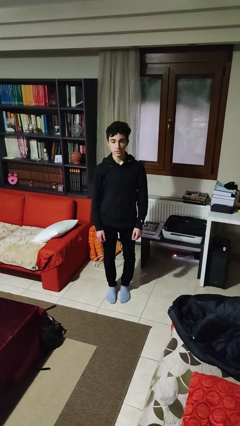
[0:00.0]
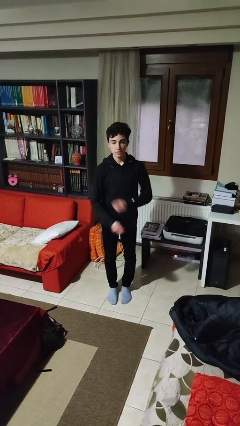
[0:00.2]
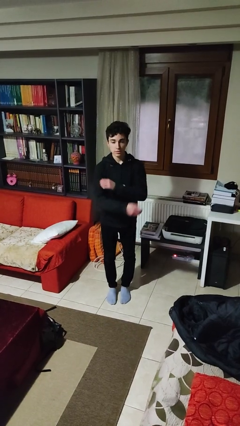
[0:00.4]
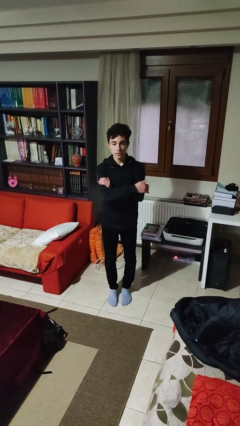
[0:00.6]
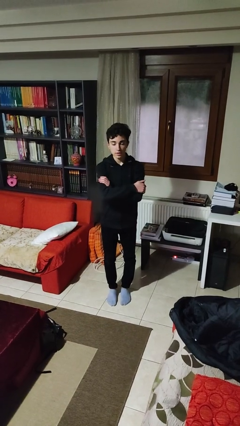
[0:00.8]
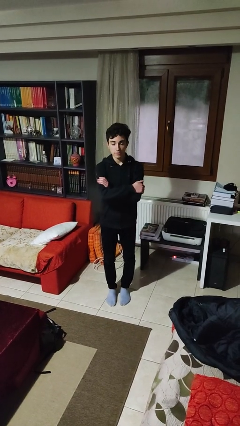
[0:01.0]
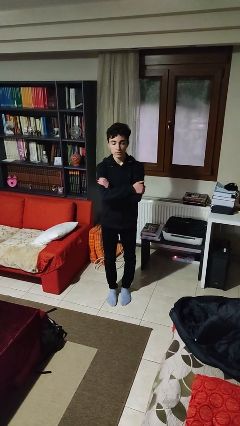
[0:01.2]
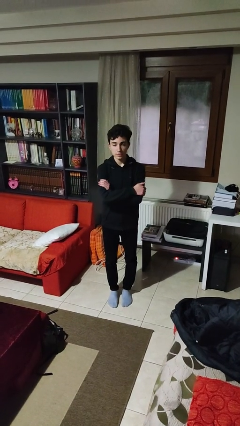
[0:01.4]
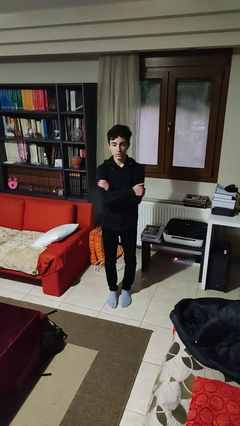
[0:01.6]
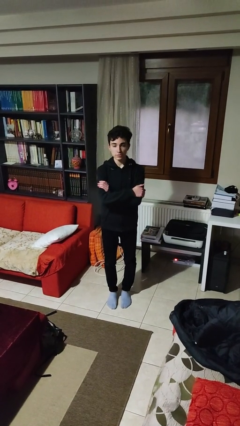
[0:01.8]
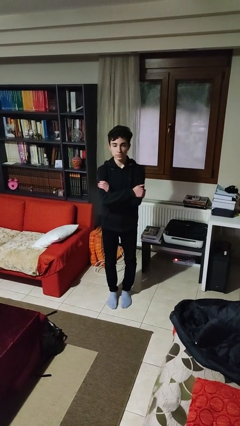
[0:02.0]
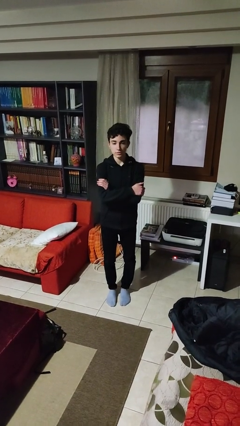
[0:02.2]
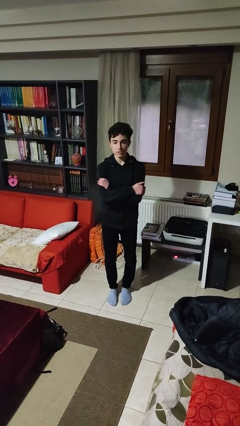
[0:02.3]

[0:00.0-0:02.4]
person crosses arms

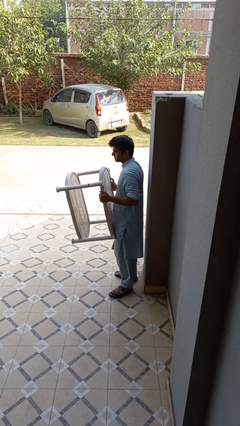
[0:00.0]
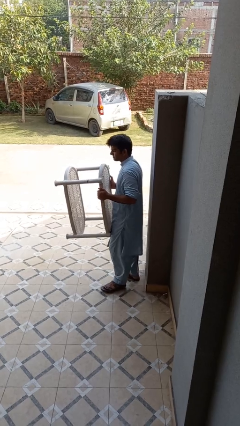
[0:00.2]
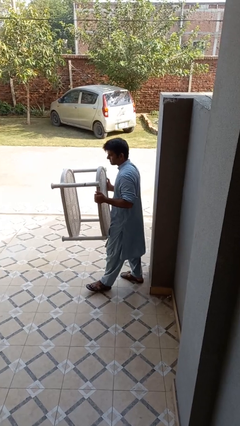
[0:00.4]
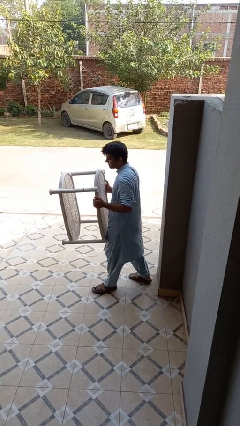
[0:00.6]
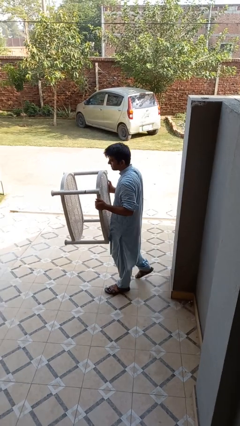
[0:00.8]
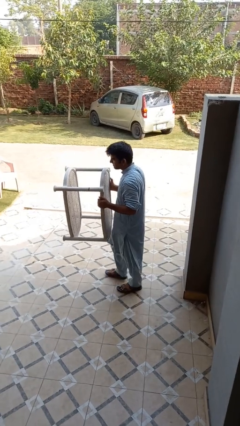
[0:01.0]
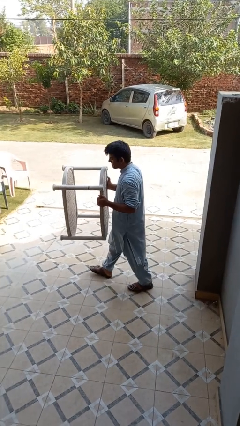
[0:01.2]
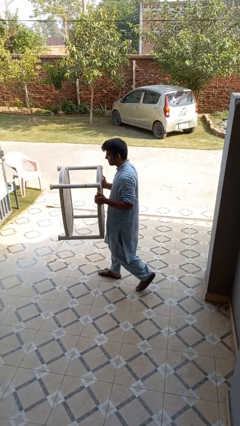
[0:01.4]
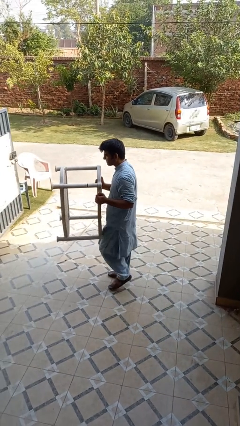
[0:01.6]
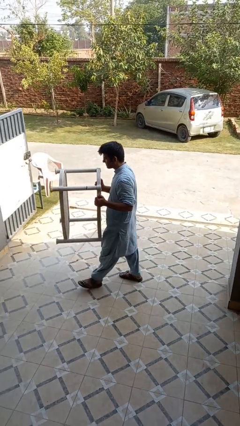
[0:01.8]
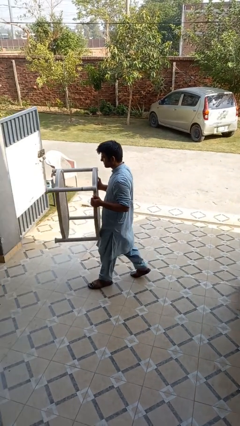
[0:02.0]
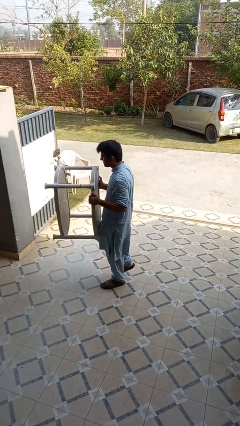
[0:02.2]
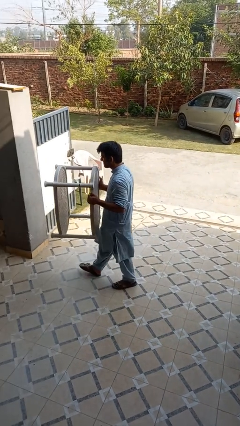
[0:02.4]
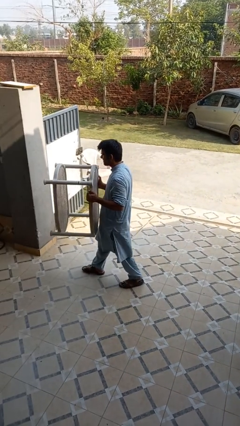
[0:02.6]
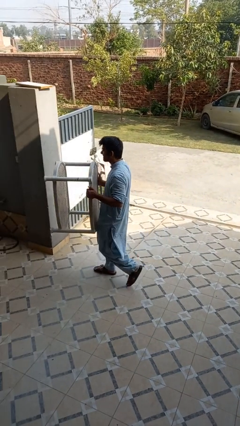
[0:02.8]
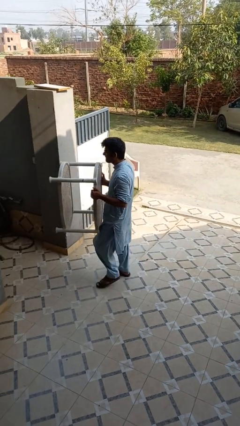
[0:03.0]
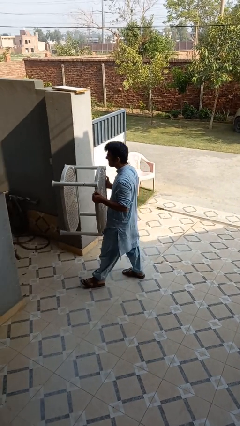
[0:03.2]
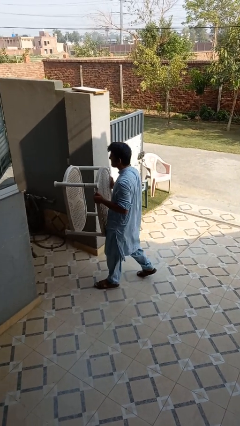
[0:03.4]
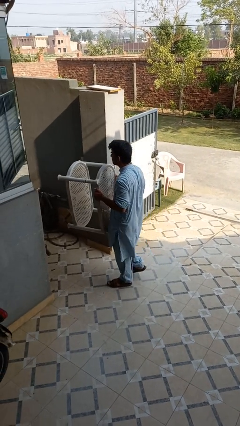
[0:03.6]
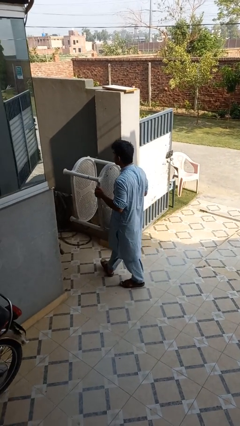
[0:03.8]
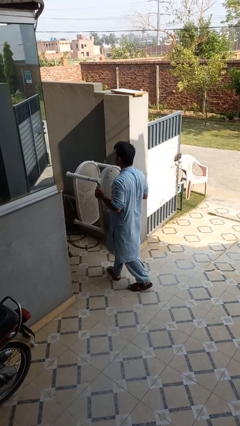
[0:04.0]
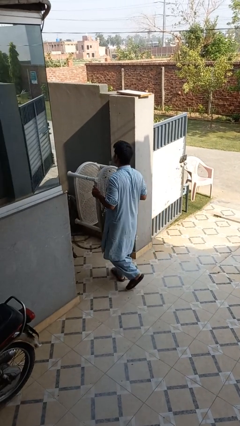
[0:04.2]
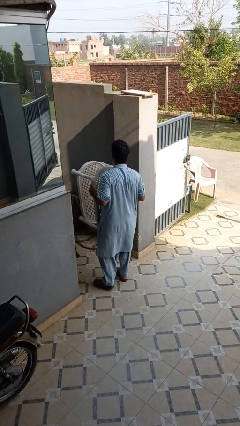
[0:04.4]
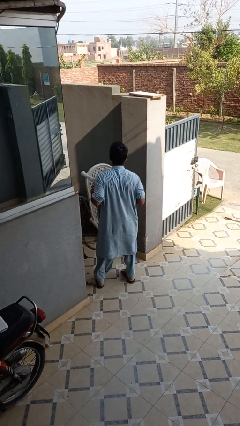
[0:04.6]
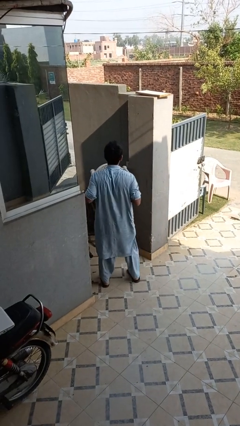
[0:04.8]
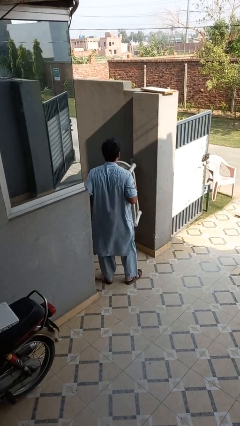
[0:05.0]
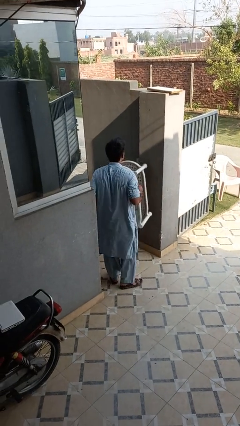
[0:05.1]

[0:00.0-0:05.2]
person carries furniture

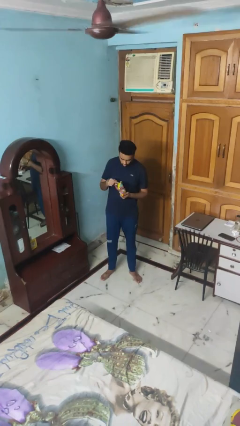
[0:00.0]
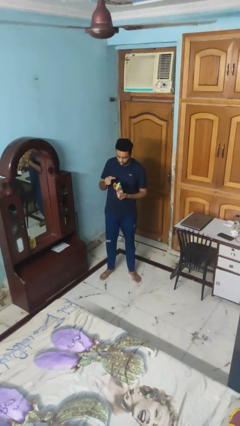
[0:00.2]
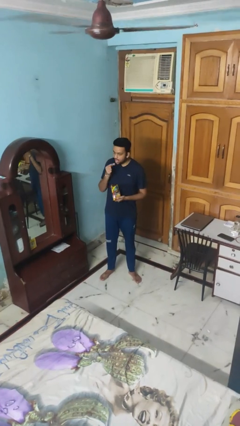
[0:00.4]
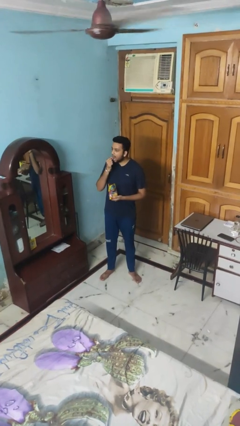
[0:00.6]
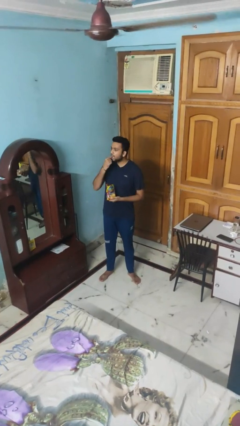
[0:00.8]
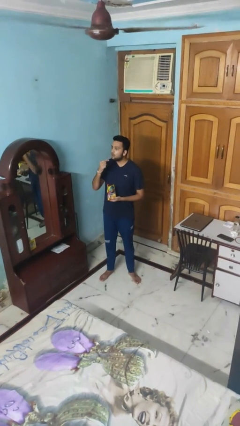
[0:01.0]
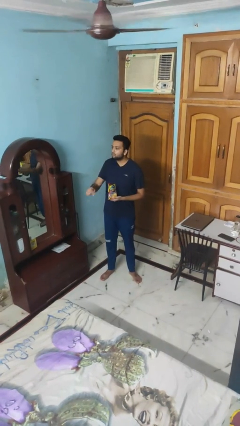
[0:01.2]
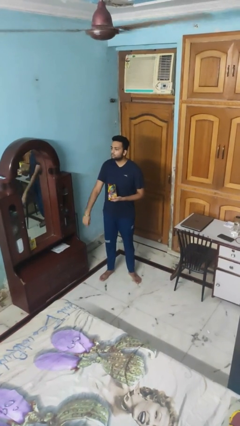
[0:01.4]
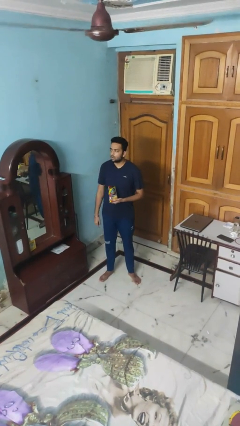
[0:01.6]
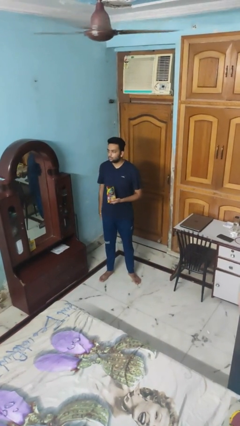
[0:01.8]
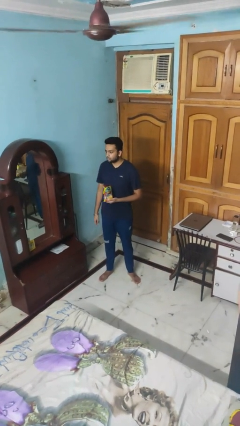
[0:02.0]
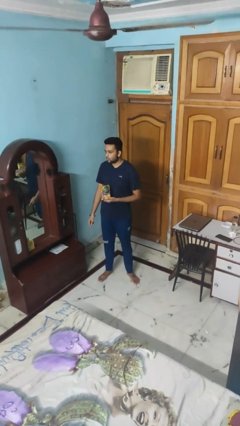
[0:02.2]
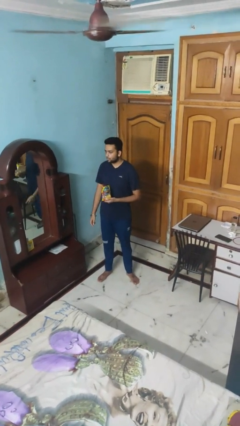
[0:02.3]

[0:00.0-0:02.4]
person eats snack from bag

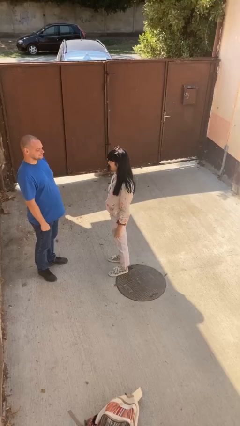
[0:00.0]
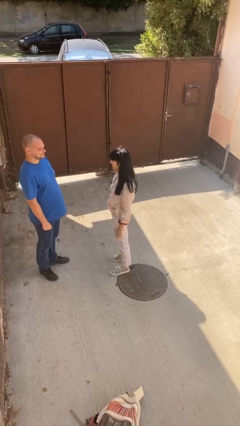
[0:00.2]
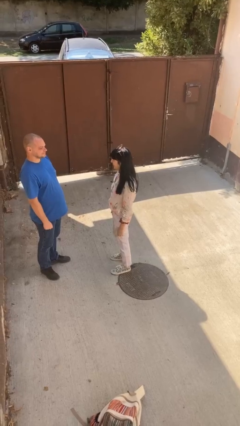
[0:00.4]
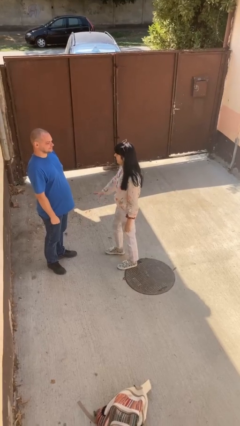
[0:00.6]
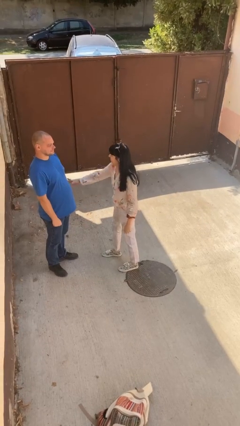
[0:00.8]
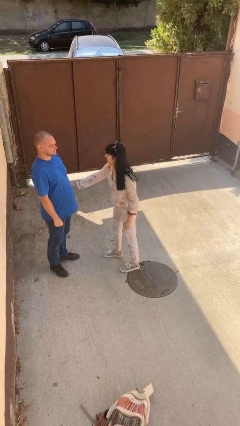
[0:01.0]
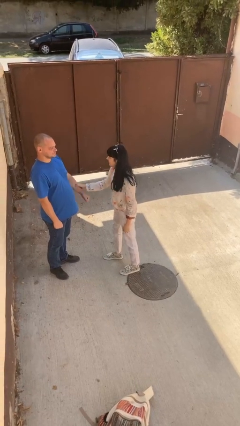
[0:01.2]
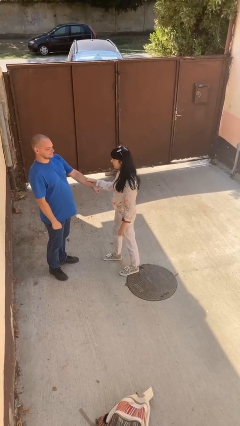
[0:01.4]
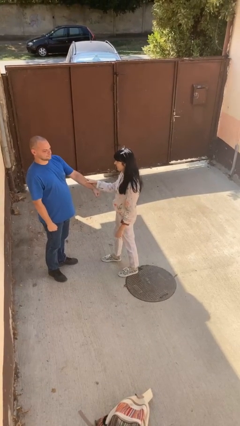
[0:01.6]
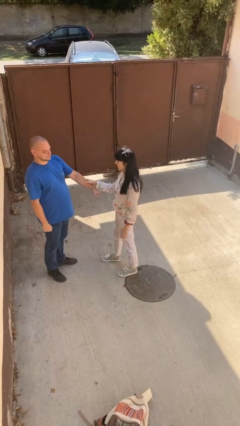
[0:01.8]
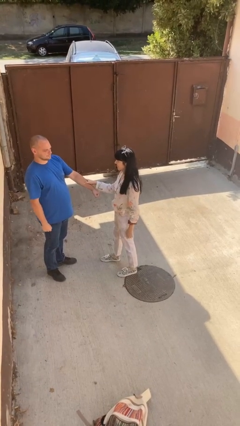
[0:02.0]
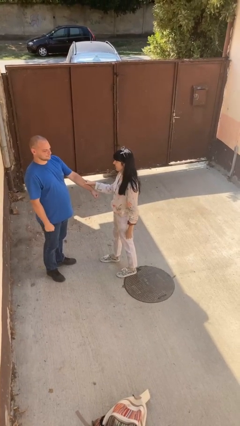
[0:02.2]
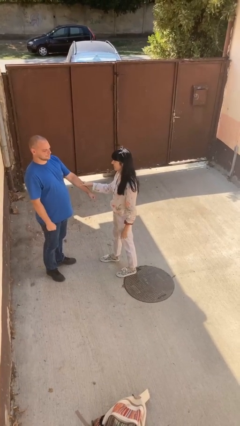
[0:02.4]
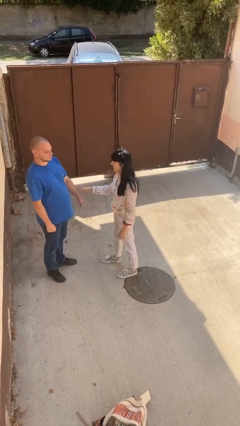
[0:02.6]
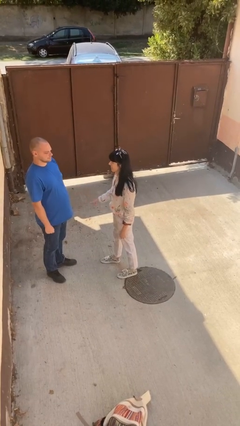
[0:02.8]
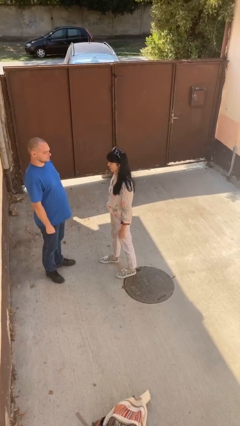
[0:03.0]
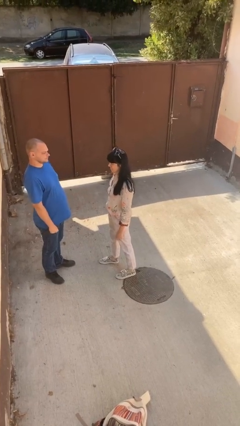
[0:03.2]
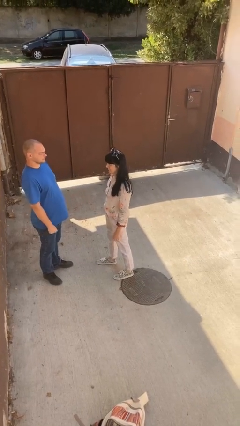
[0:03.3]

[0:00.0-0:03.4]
person grabs person by forearm

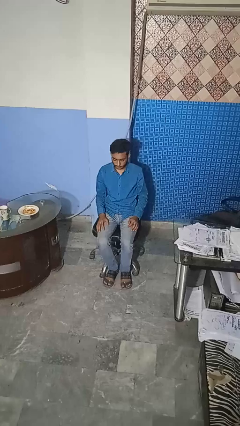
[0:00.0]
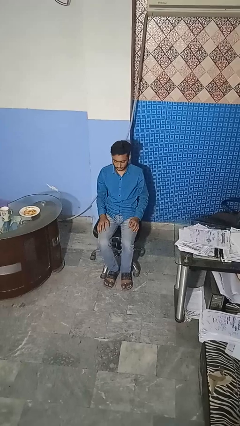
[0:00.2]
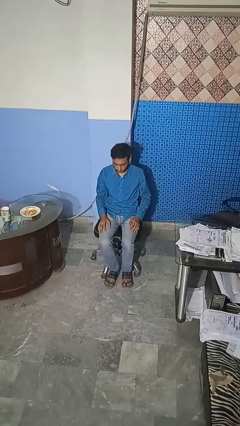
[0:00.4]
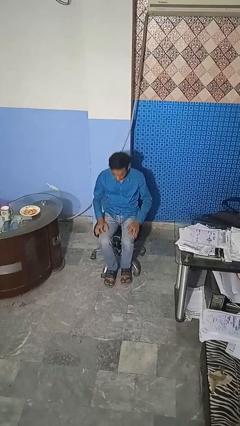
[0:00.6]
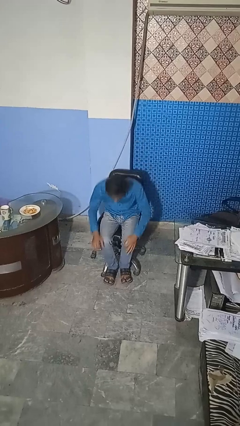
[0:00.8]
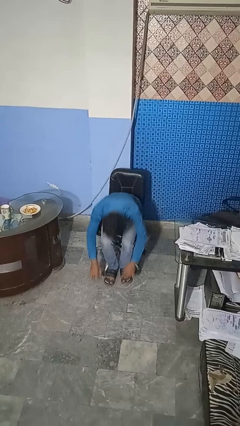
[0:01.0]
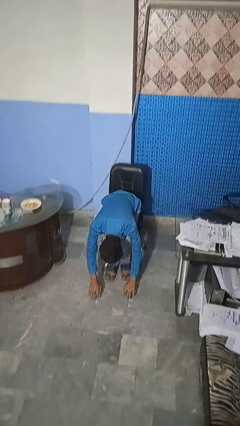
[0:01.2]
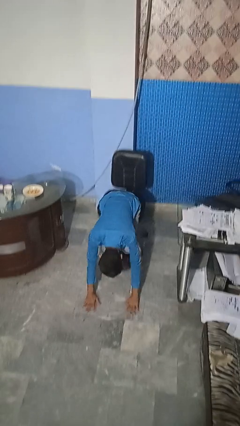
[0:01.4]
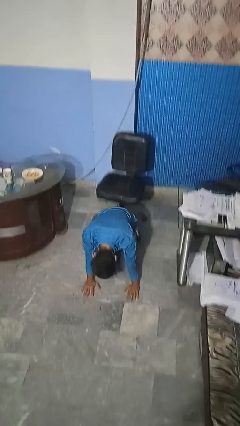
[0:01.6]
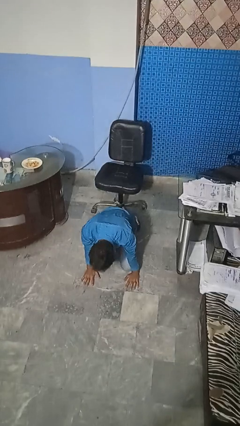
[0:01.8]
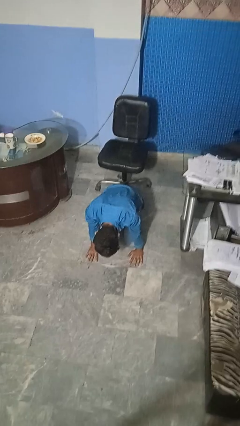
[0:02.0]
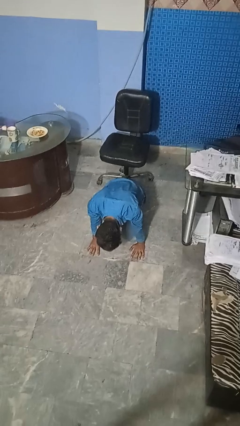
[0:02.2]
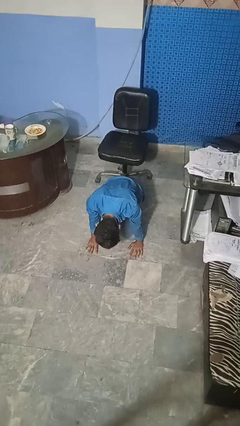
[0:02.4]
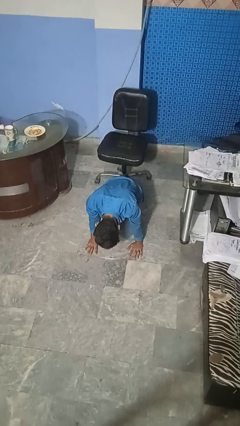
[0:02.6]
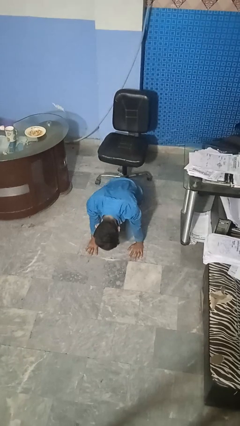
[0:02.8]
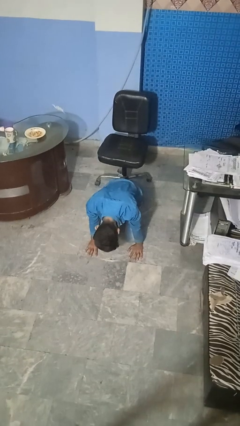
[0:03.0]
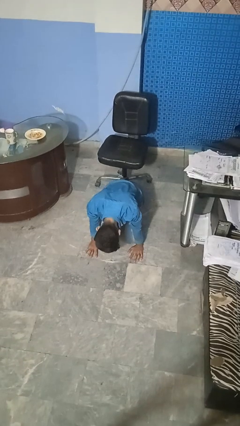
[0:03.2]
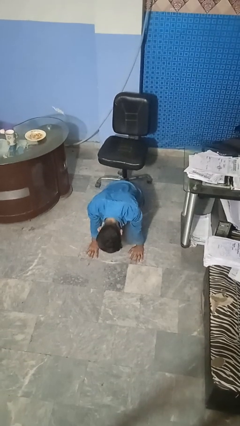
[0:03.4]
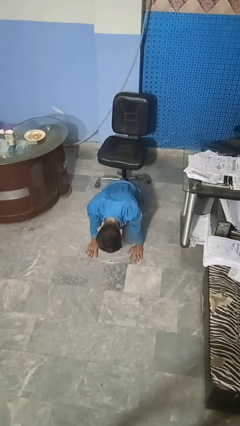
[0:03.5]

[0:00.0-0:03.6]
person falls from chair

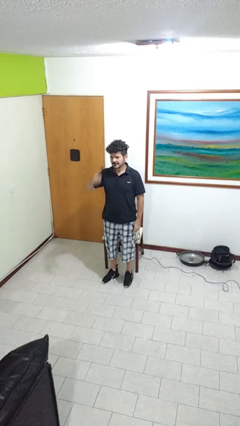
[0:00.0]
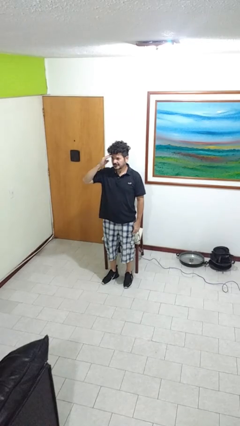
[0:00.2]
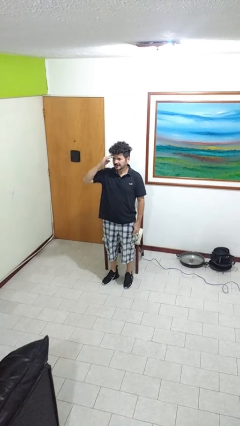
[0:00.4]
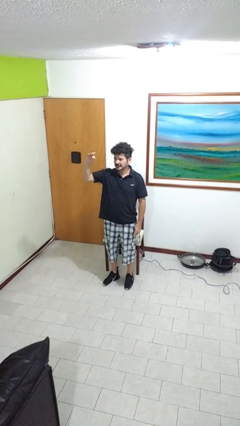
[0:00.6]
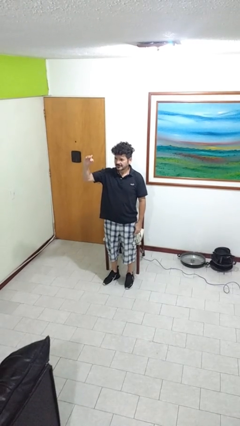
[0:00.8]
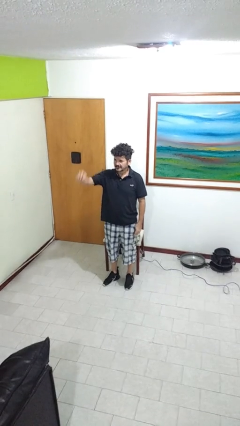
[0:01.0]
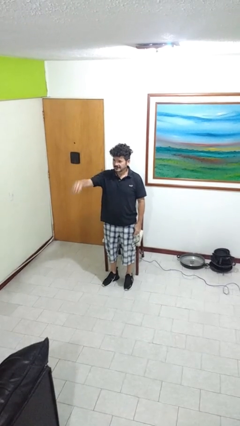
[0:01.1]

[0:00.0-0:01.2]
person salutes
